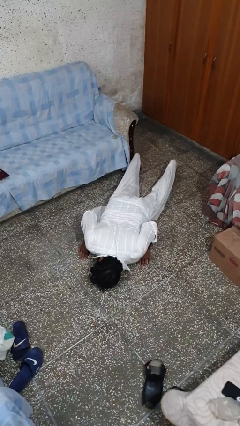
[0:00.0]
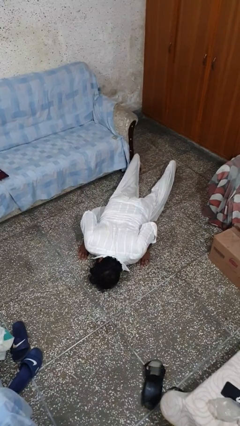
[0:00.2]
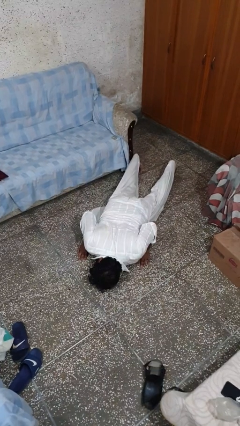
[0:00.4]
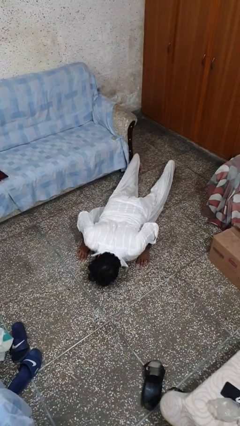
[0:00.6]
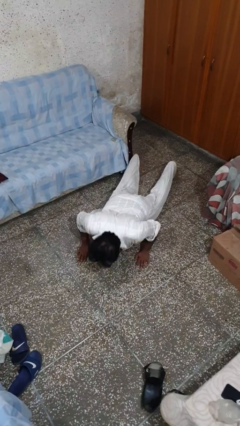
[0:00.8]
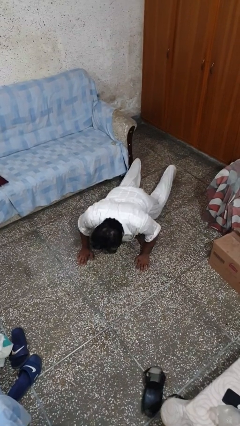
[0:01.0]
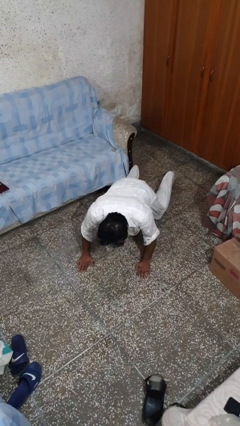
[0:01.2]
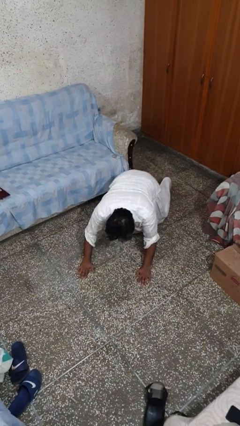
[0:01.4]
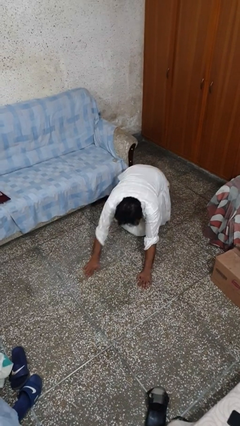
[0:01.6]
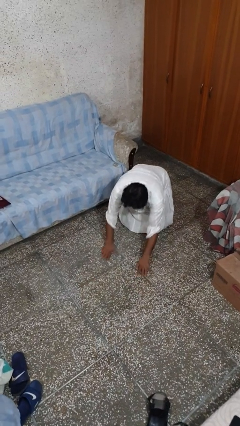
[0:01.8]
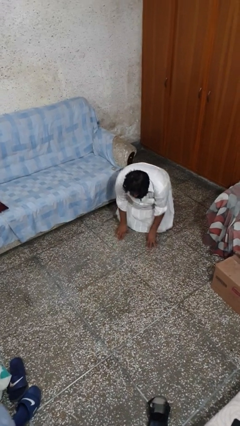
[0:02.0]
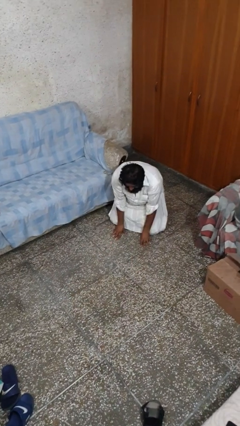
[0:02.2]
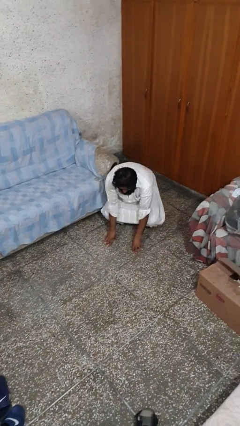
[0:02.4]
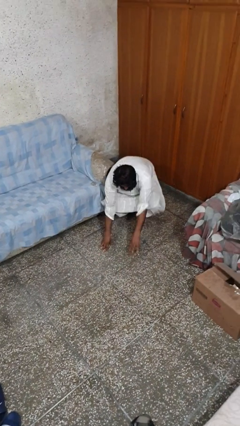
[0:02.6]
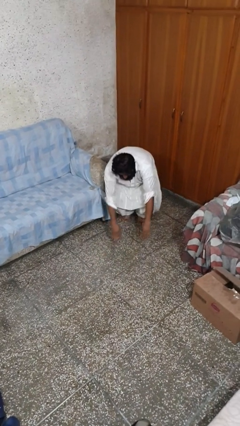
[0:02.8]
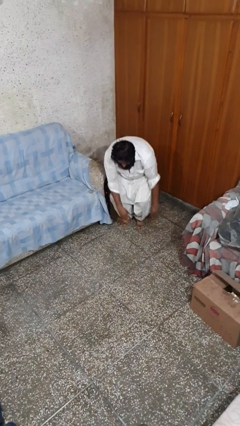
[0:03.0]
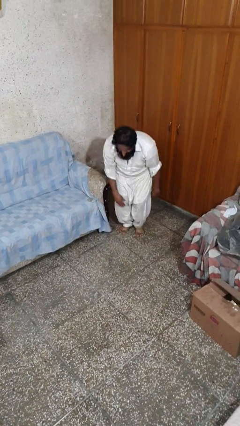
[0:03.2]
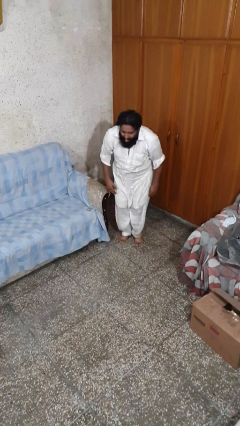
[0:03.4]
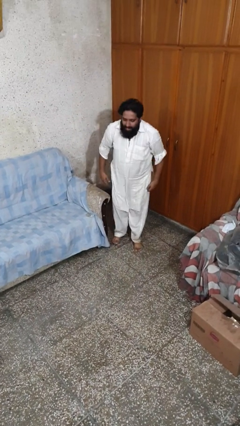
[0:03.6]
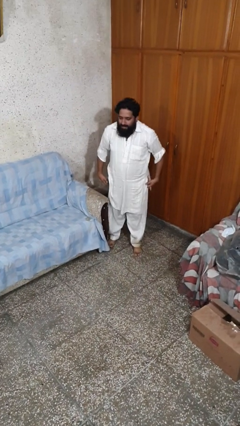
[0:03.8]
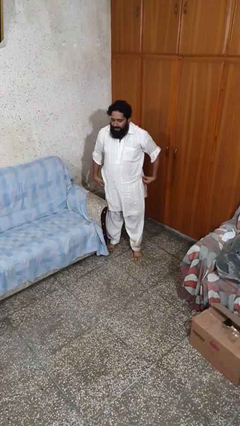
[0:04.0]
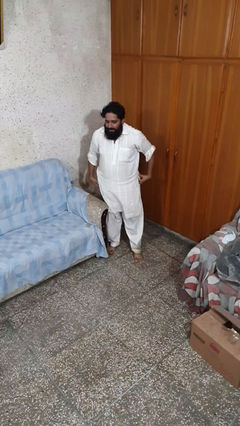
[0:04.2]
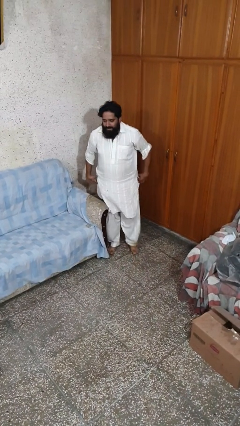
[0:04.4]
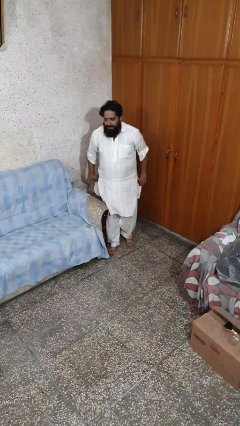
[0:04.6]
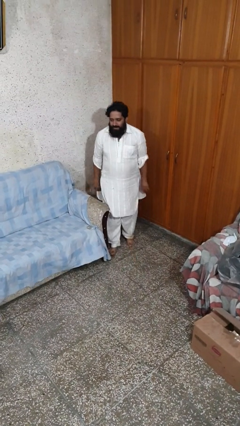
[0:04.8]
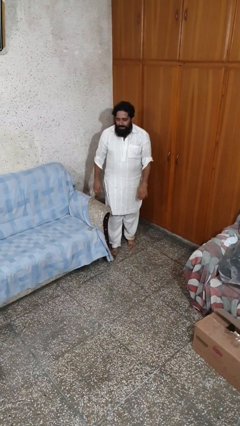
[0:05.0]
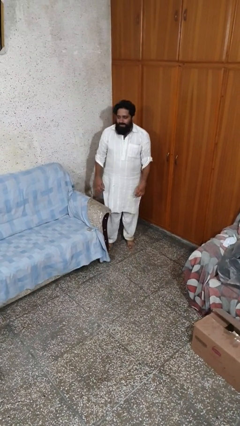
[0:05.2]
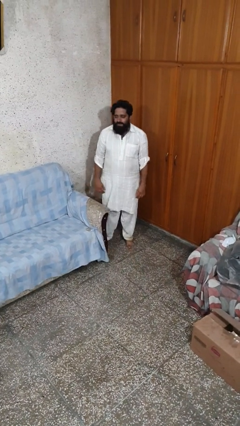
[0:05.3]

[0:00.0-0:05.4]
person stands up from floor

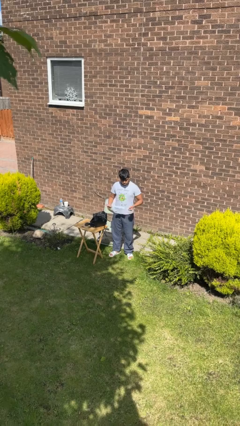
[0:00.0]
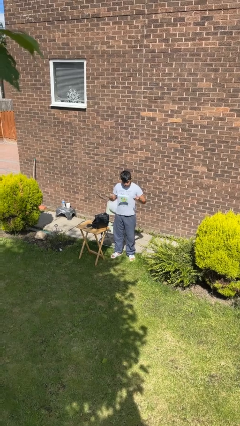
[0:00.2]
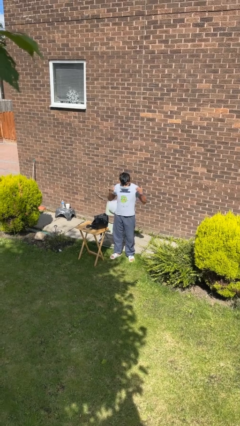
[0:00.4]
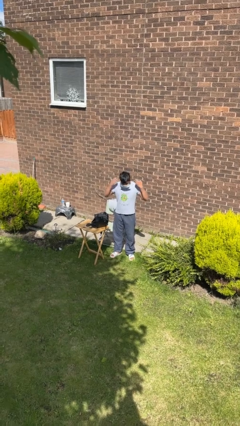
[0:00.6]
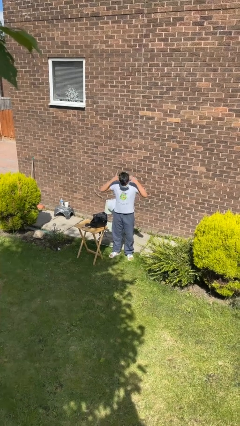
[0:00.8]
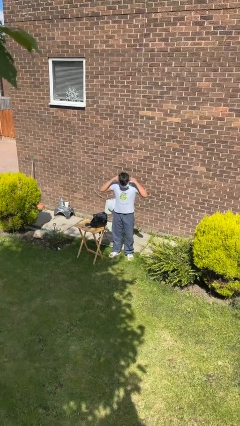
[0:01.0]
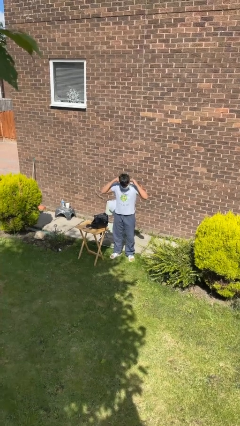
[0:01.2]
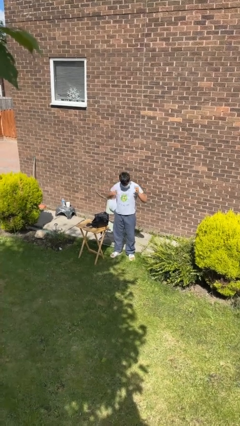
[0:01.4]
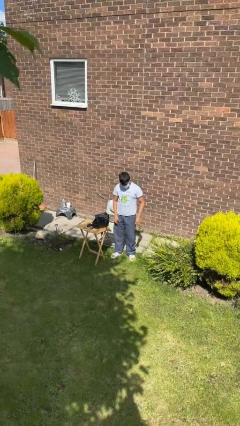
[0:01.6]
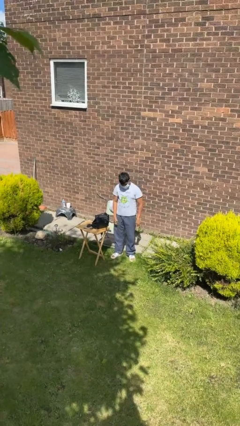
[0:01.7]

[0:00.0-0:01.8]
person puts on facemask

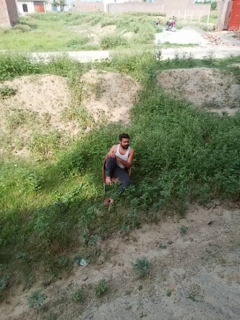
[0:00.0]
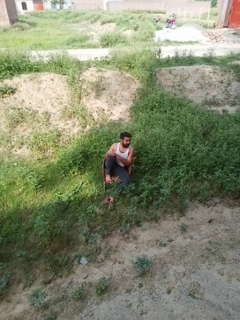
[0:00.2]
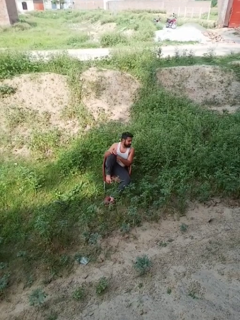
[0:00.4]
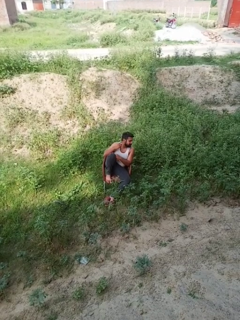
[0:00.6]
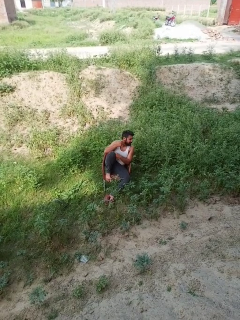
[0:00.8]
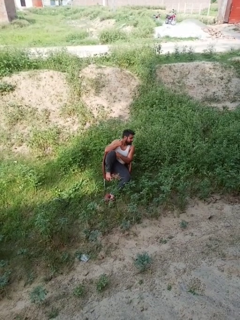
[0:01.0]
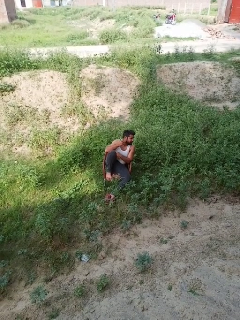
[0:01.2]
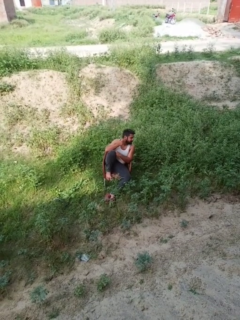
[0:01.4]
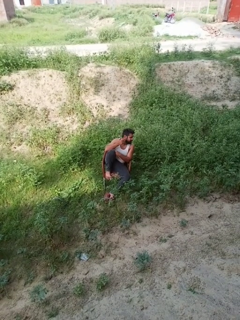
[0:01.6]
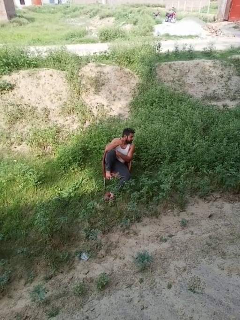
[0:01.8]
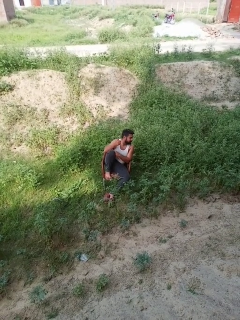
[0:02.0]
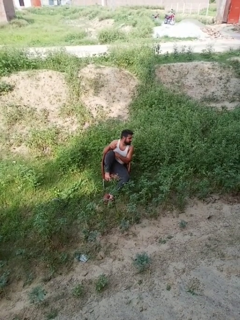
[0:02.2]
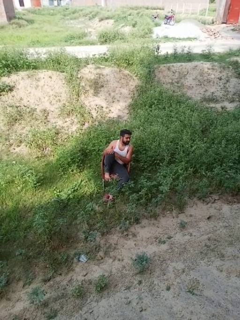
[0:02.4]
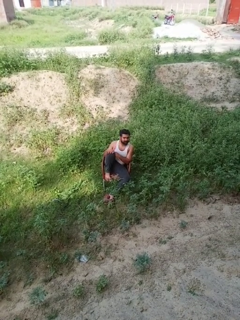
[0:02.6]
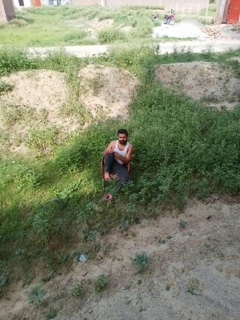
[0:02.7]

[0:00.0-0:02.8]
person touches earlobe

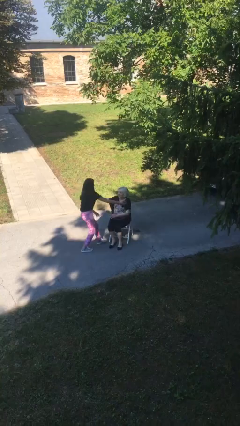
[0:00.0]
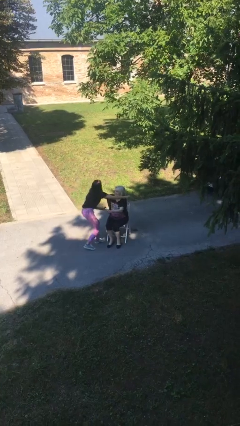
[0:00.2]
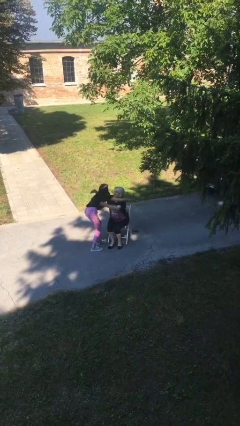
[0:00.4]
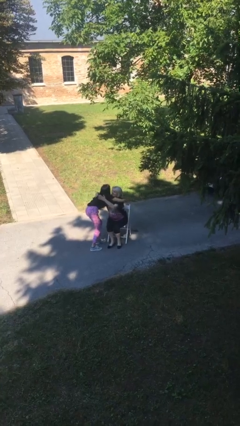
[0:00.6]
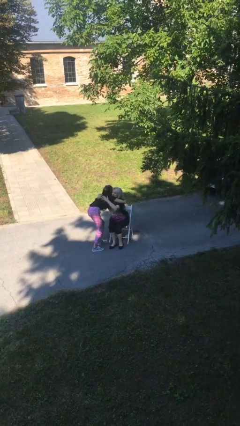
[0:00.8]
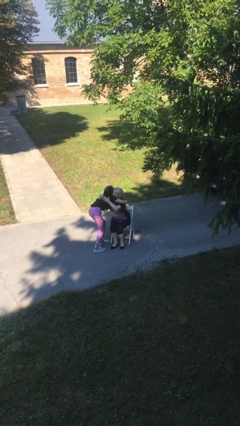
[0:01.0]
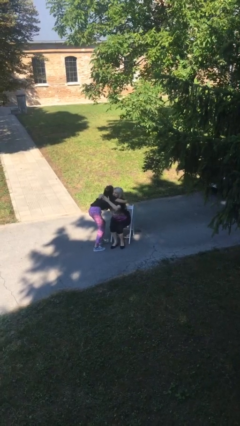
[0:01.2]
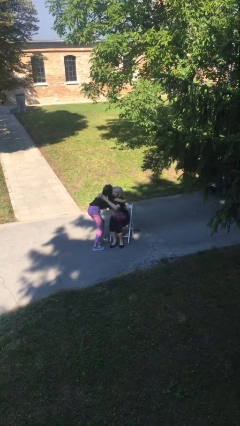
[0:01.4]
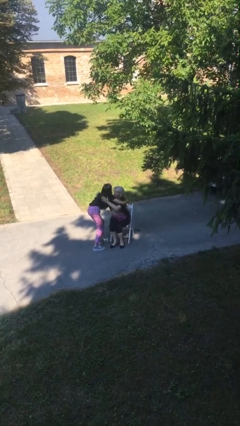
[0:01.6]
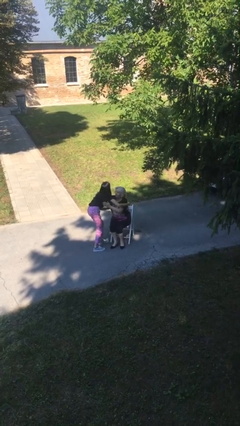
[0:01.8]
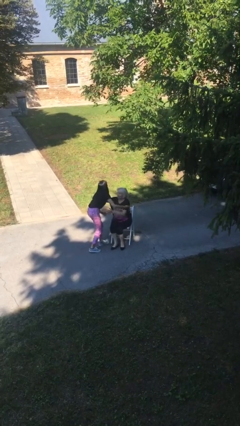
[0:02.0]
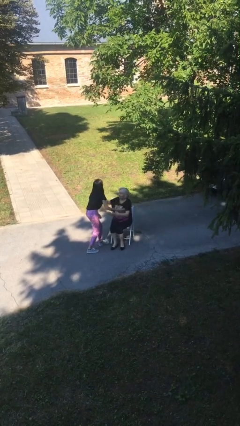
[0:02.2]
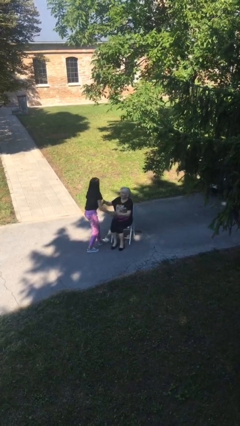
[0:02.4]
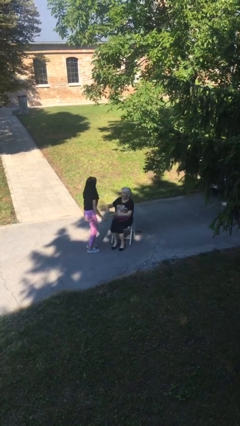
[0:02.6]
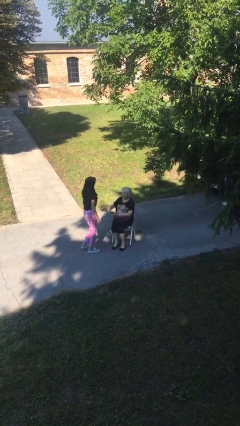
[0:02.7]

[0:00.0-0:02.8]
person embraces person

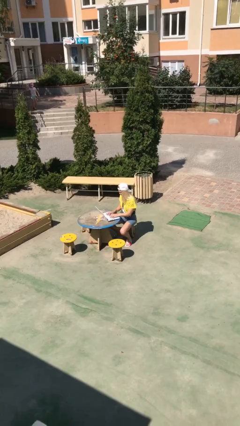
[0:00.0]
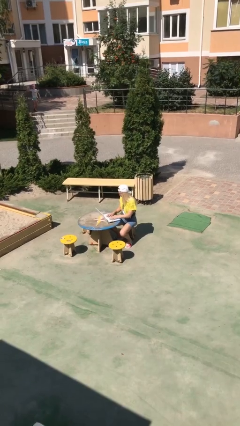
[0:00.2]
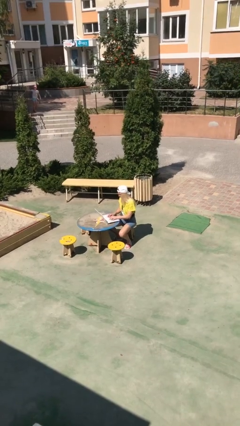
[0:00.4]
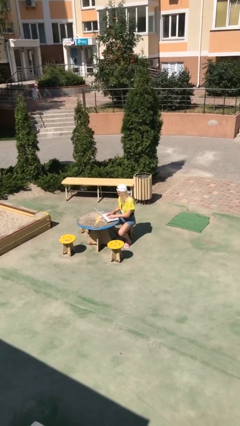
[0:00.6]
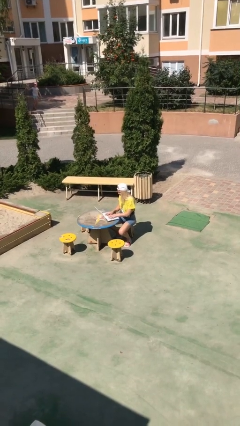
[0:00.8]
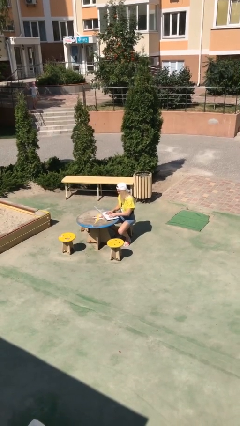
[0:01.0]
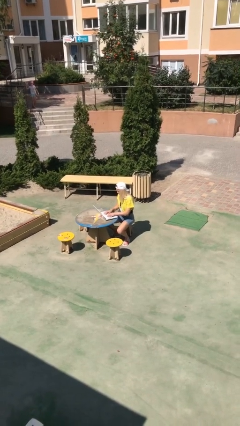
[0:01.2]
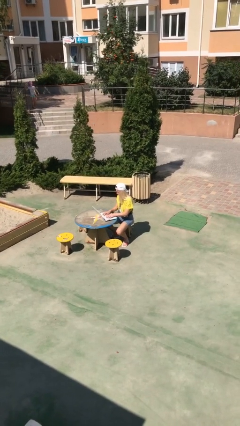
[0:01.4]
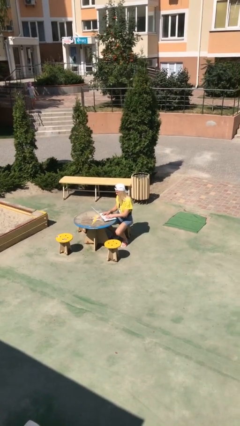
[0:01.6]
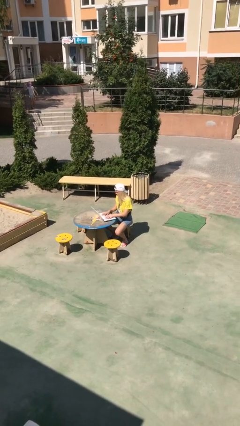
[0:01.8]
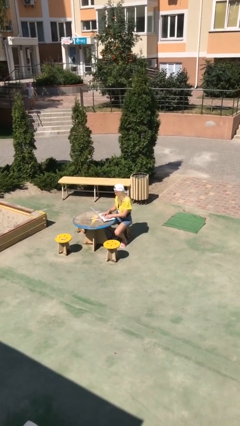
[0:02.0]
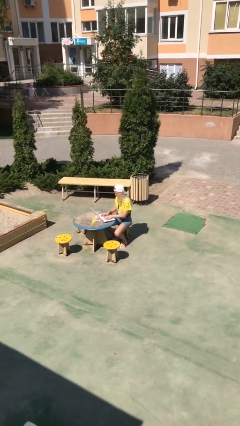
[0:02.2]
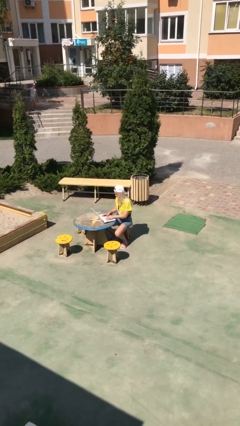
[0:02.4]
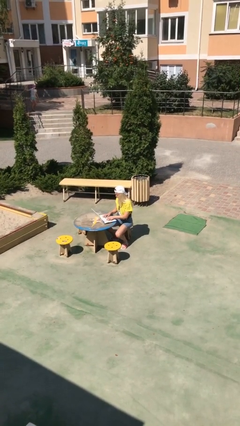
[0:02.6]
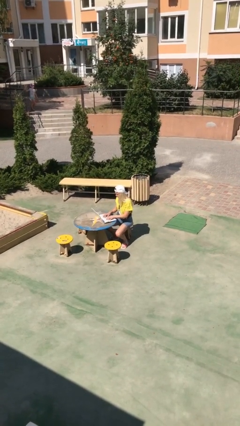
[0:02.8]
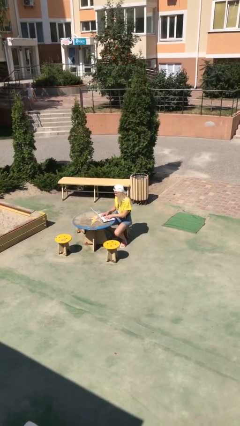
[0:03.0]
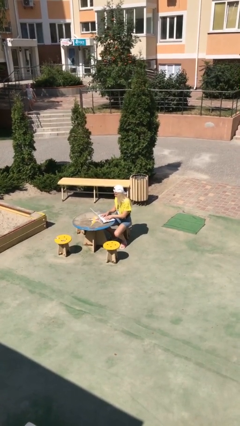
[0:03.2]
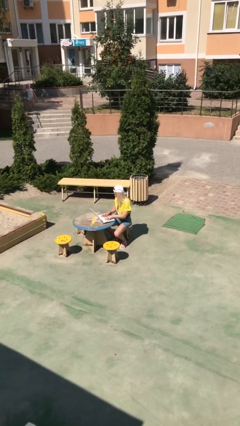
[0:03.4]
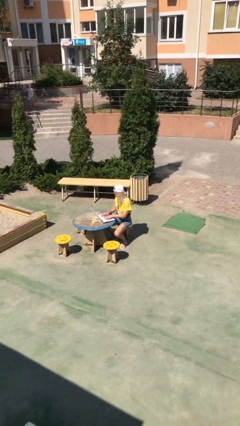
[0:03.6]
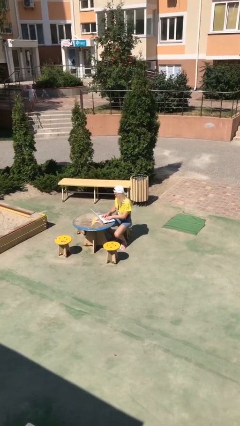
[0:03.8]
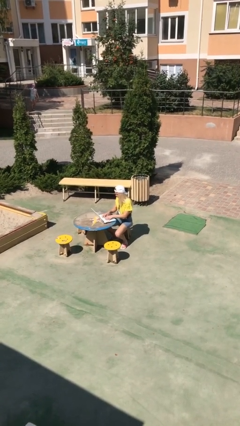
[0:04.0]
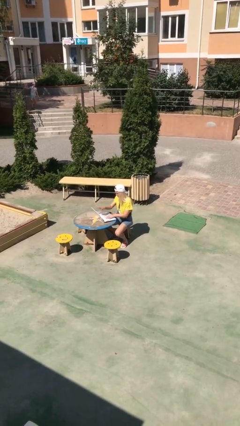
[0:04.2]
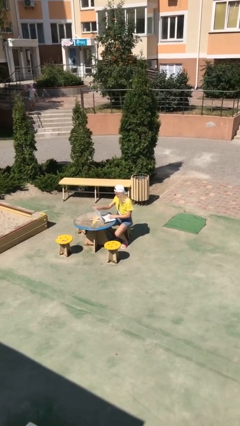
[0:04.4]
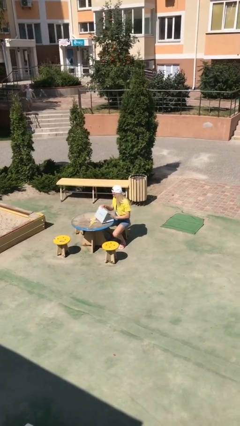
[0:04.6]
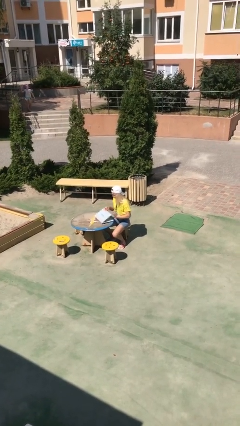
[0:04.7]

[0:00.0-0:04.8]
person interacts with laptop

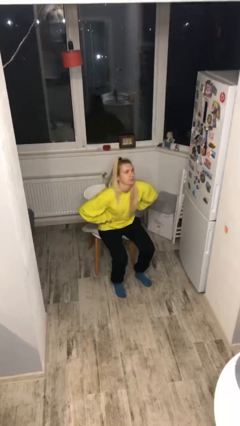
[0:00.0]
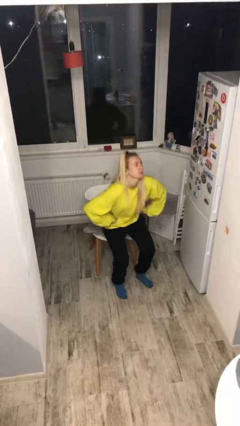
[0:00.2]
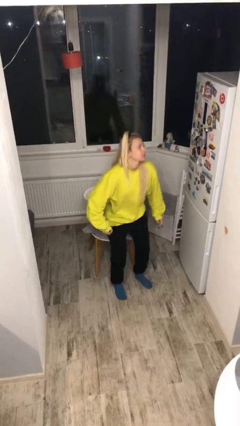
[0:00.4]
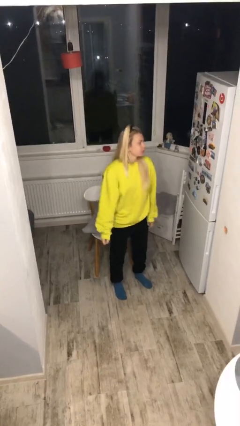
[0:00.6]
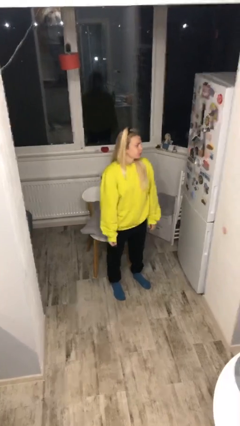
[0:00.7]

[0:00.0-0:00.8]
person stands up
